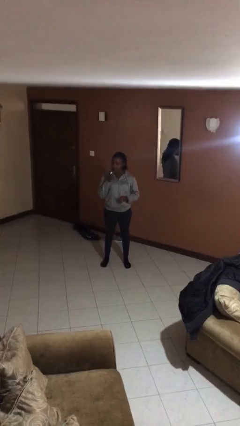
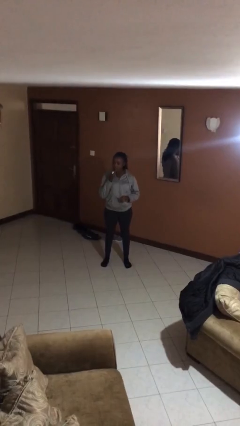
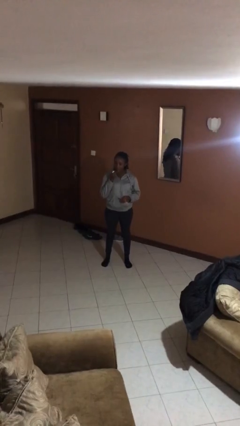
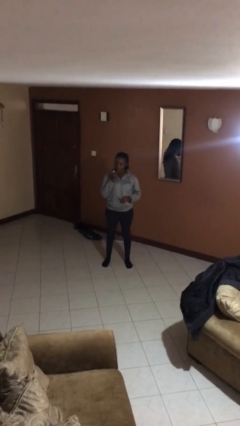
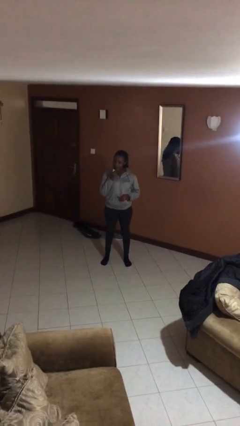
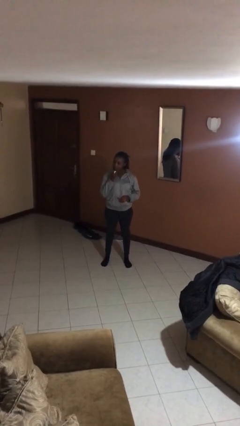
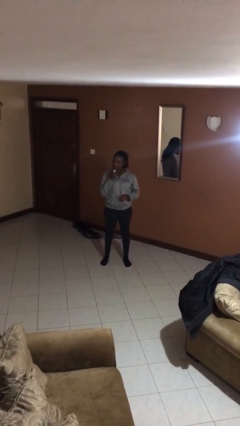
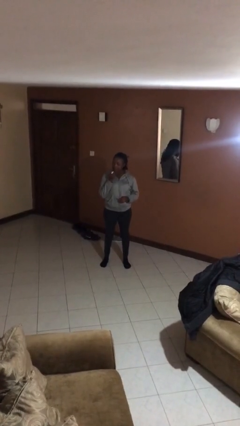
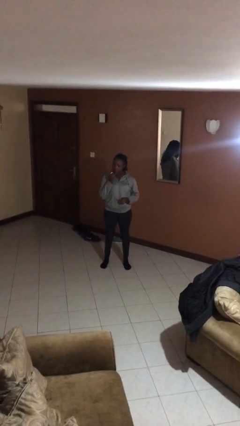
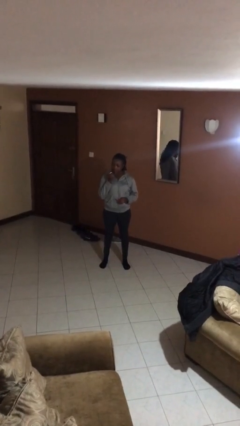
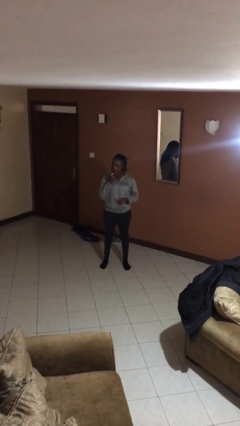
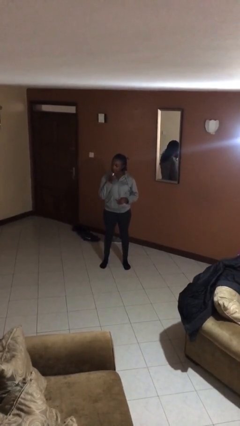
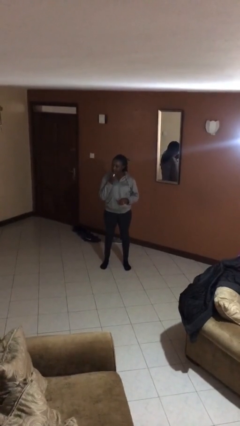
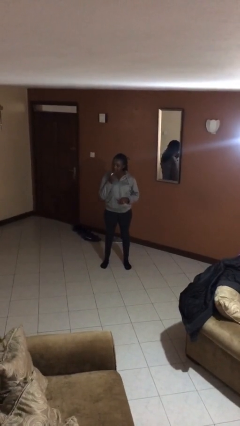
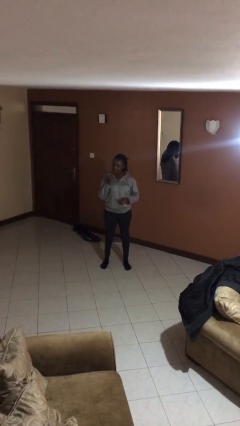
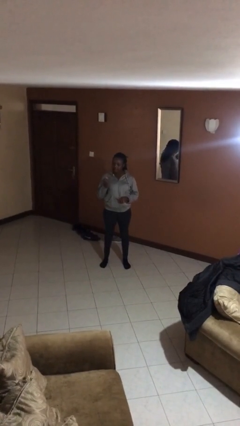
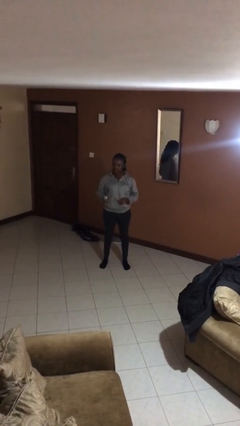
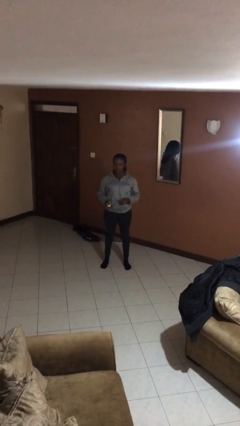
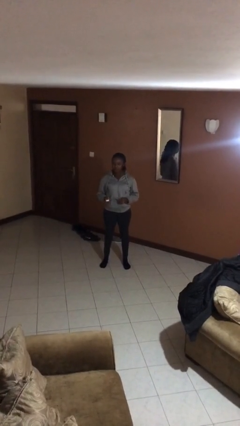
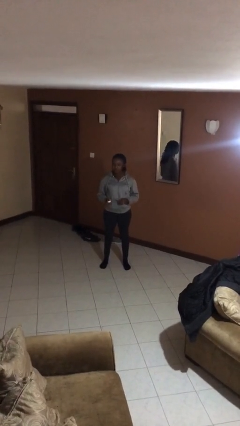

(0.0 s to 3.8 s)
person applies lip makeup

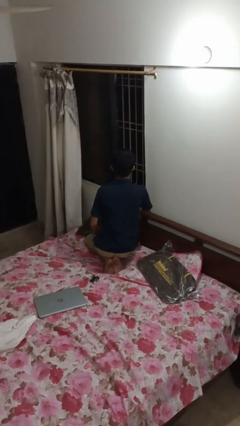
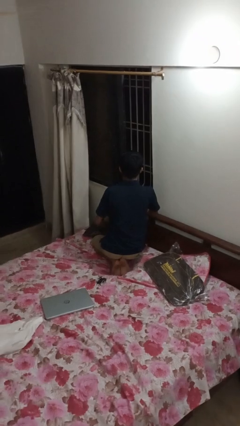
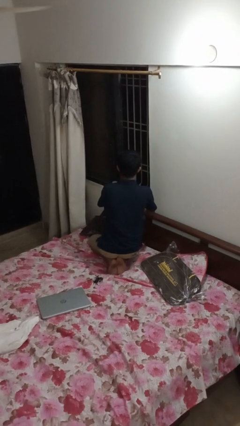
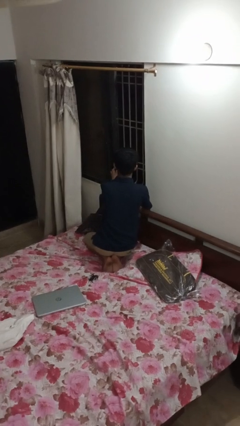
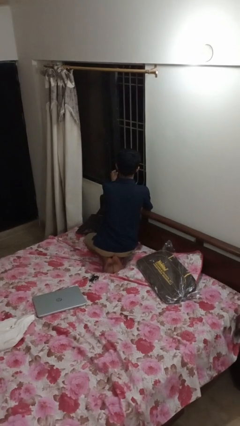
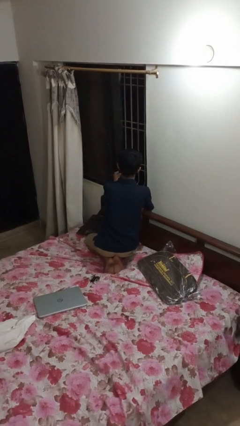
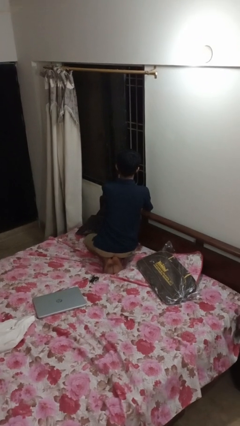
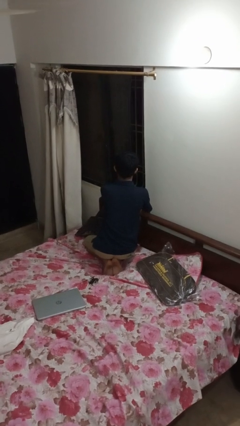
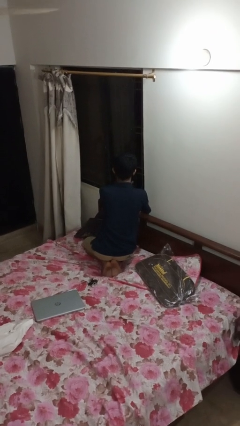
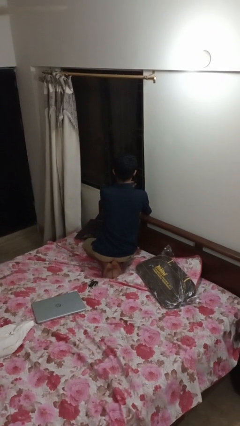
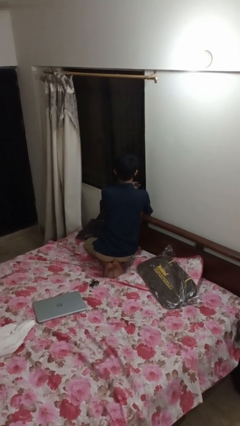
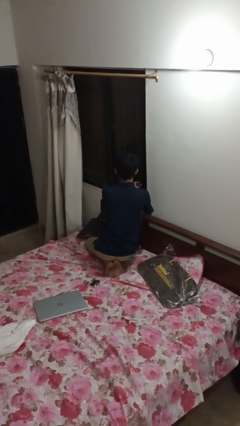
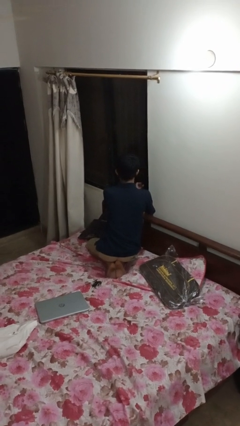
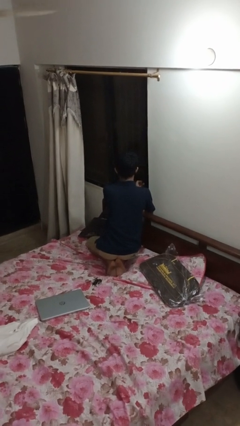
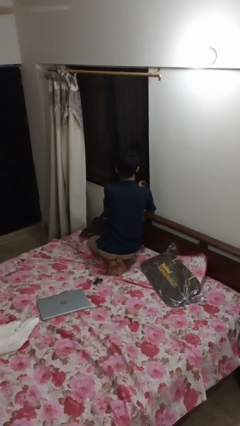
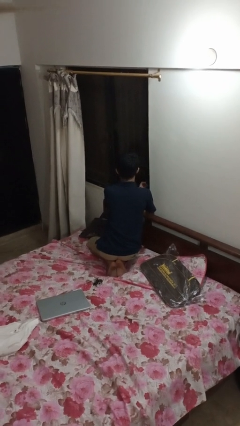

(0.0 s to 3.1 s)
person closes home window

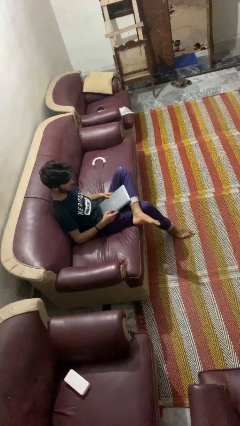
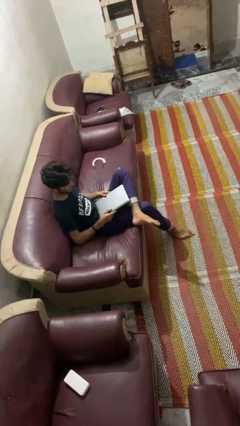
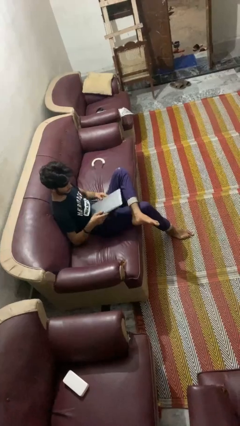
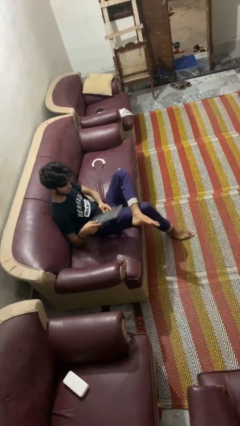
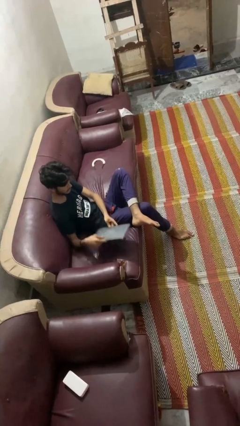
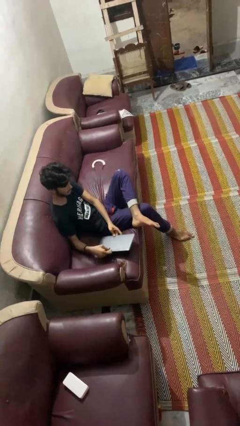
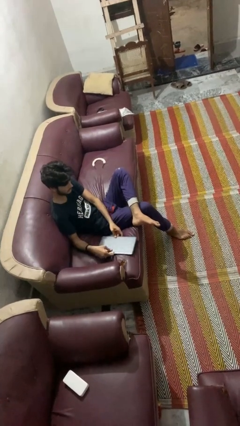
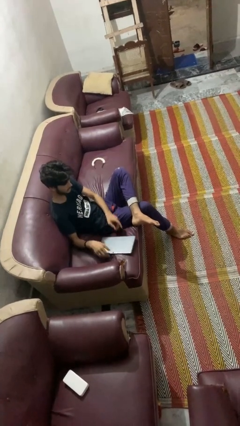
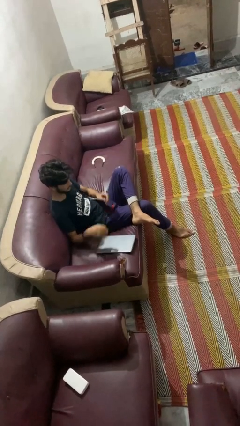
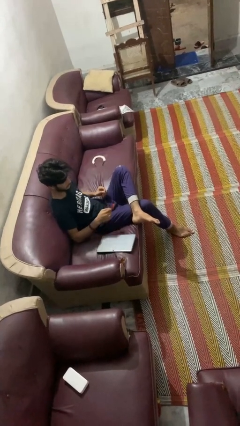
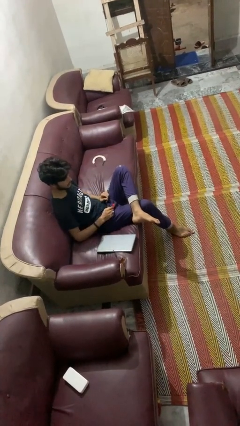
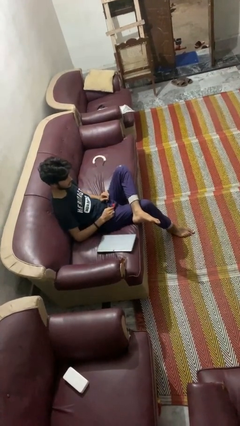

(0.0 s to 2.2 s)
person puts down object on couch

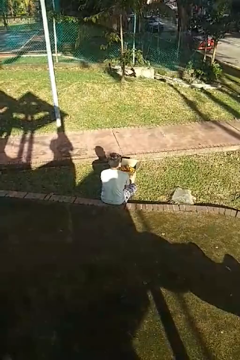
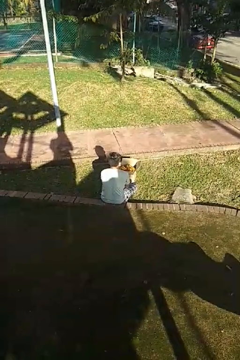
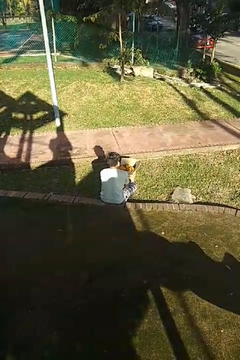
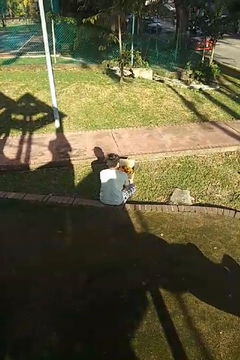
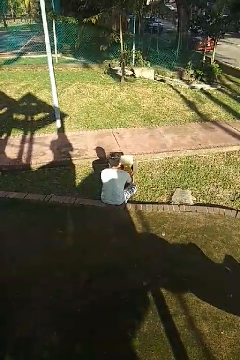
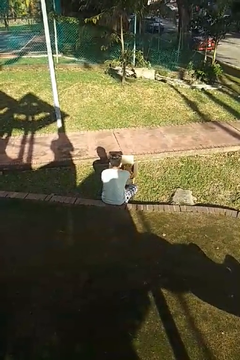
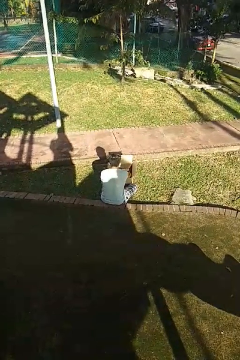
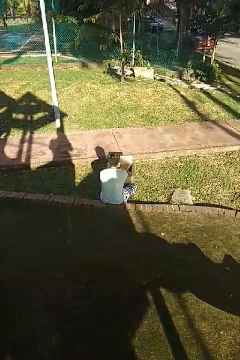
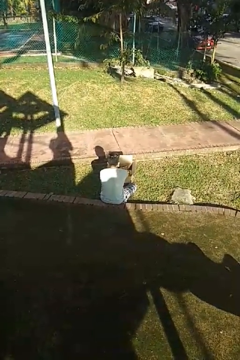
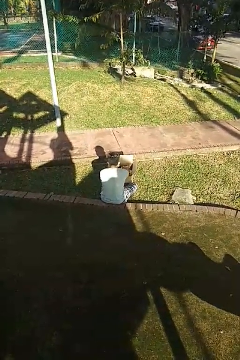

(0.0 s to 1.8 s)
person searches in box

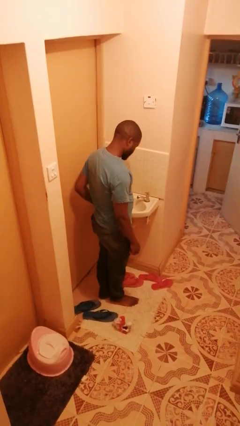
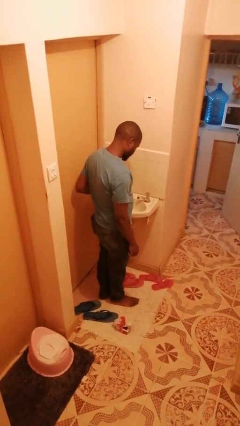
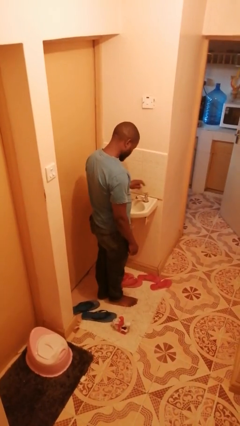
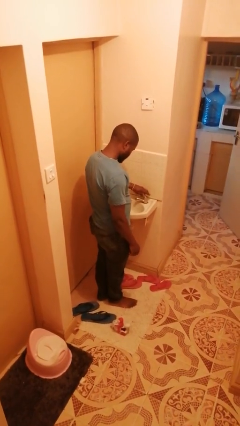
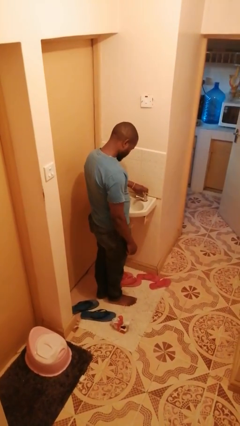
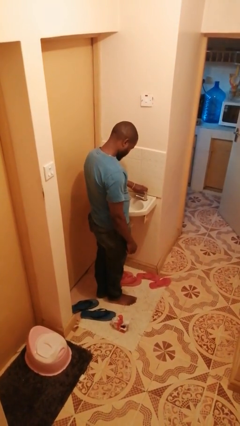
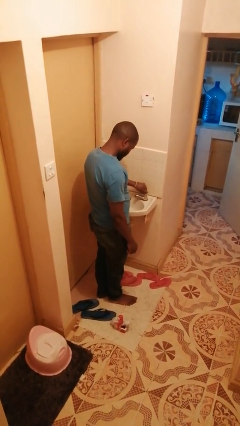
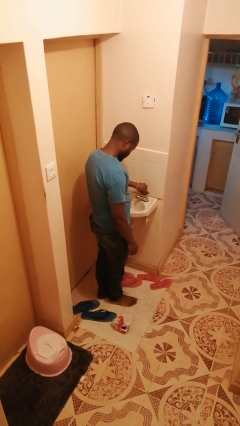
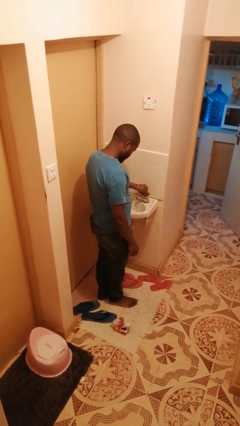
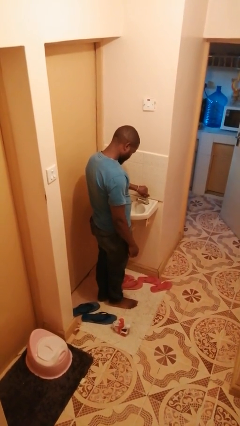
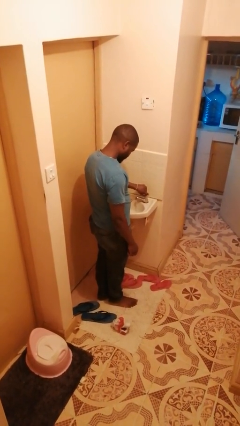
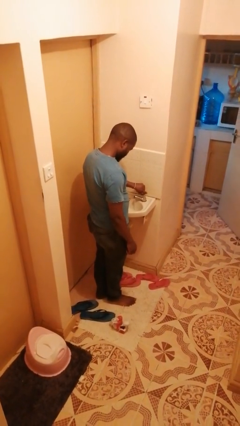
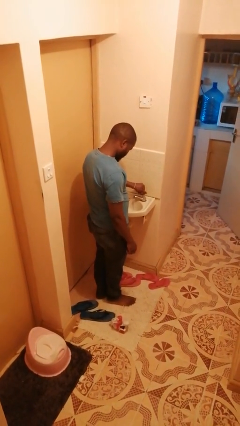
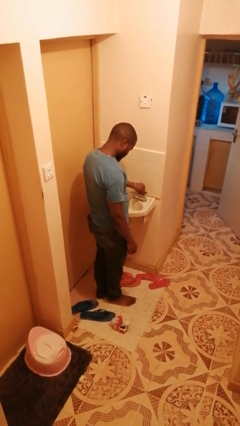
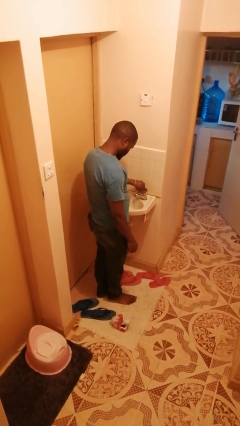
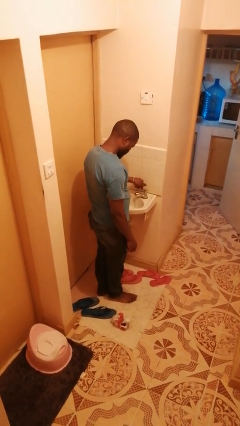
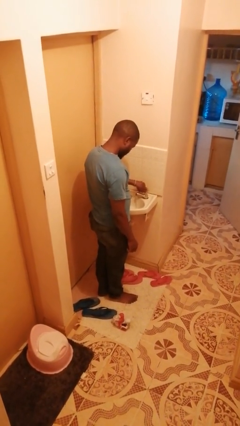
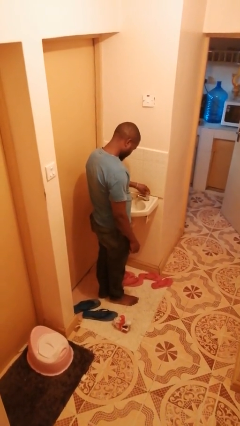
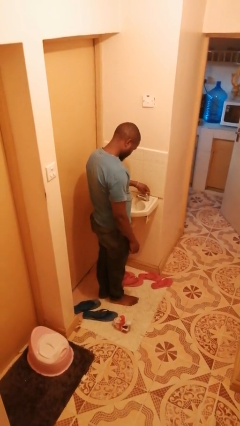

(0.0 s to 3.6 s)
person turns on faucet

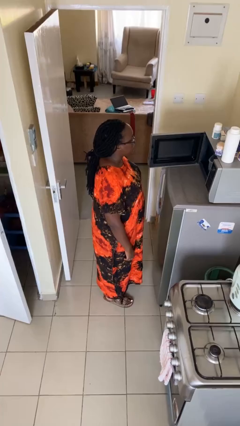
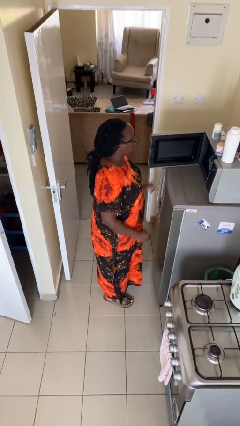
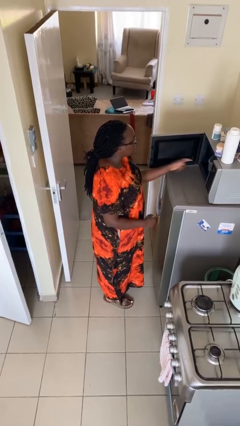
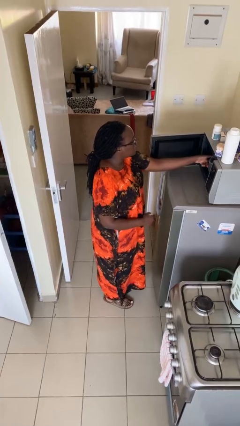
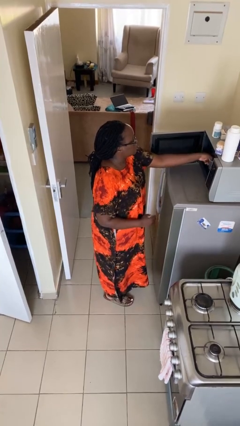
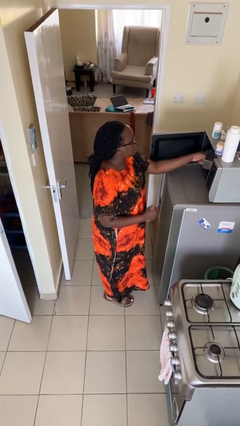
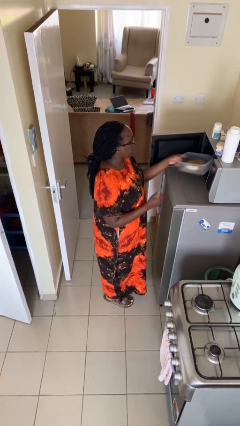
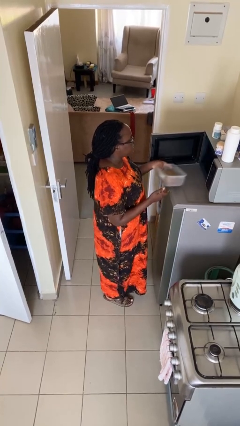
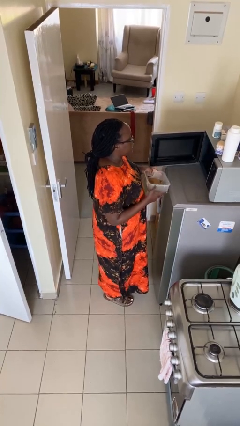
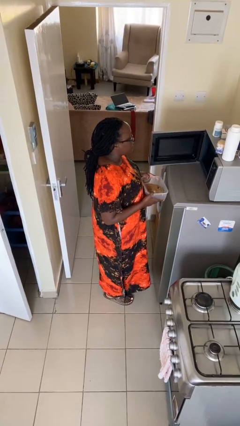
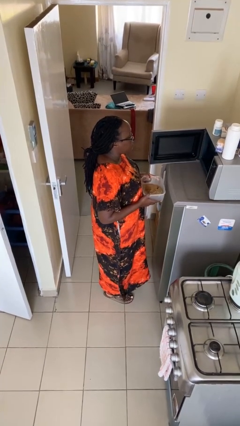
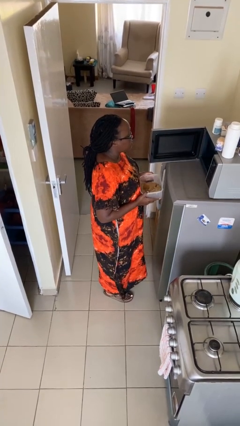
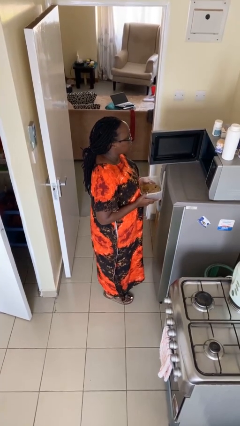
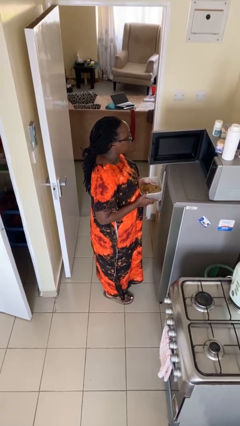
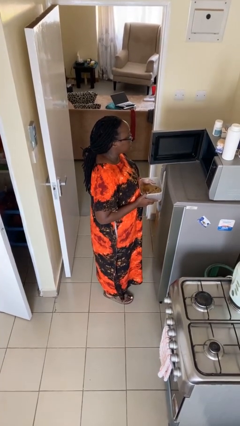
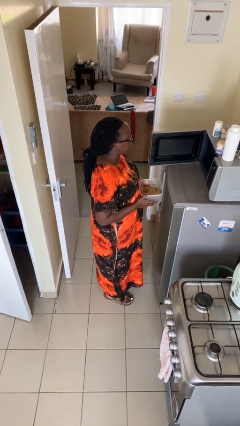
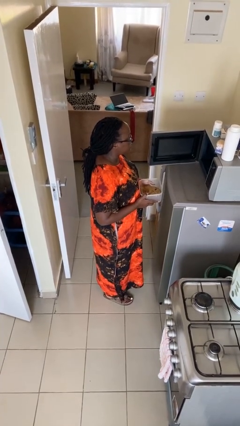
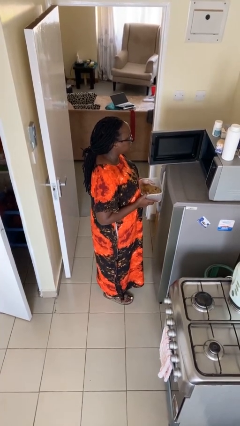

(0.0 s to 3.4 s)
person takes object from microwave
